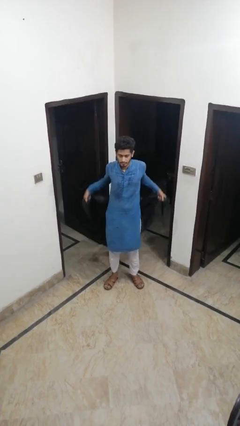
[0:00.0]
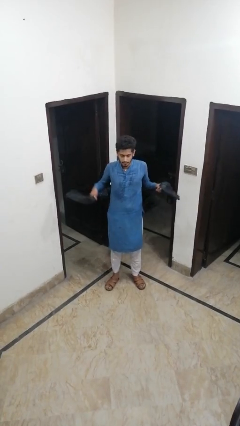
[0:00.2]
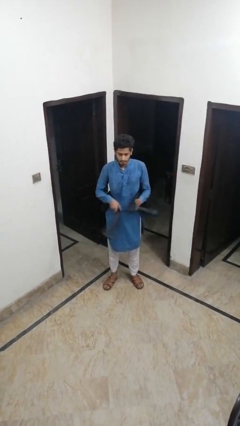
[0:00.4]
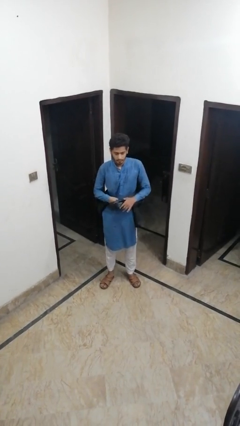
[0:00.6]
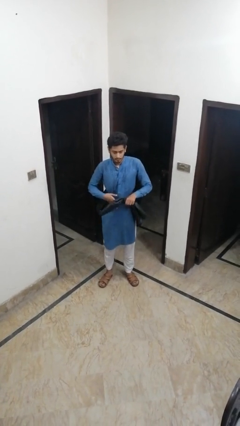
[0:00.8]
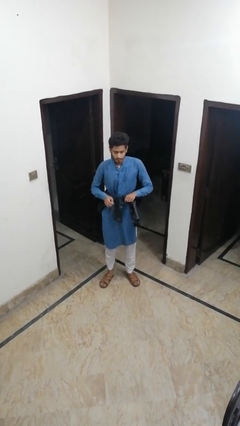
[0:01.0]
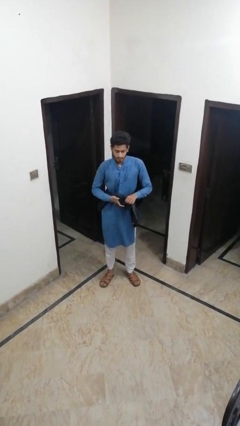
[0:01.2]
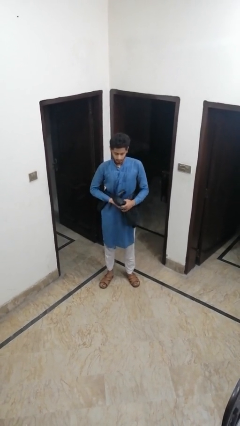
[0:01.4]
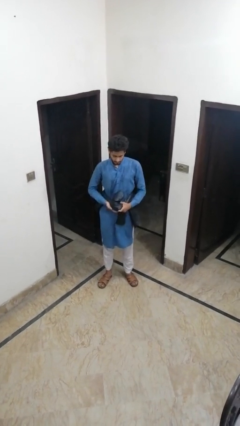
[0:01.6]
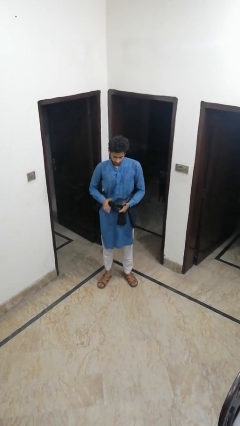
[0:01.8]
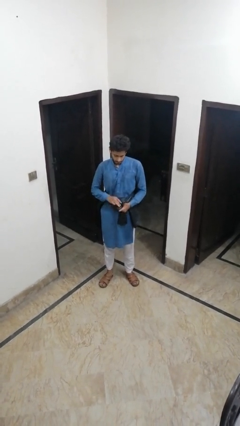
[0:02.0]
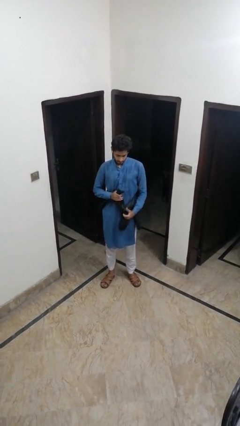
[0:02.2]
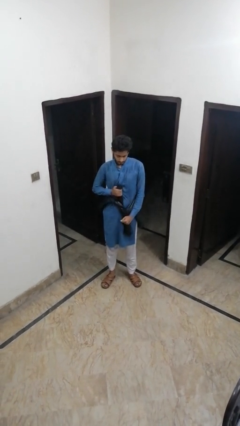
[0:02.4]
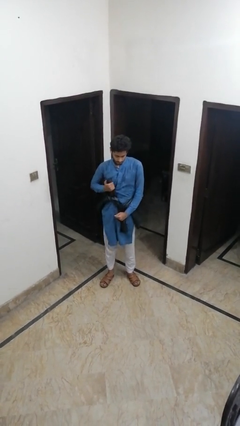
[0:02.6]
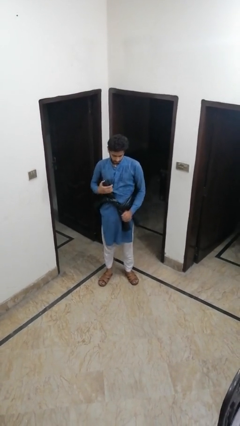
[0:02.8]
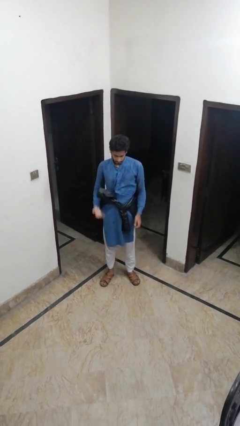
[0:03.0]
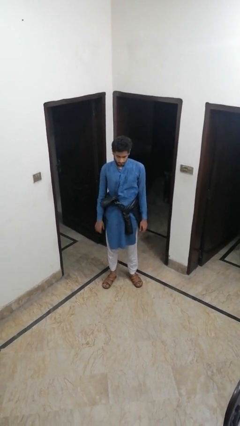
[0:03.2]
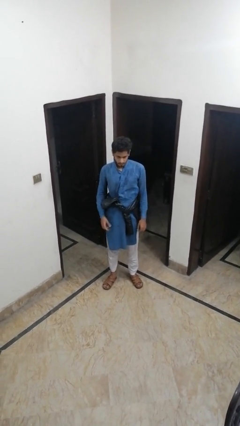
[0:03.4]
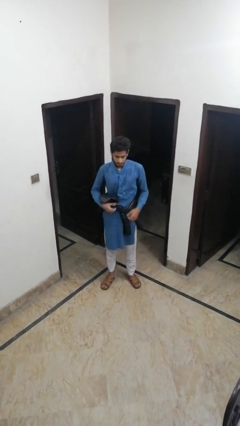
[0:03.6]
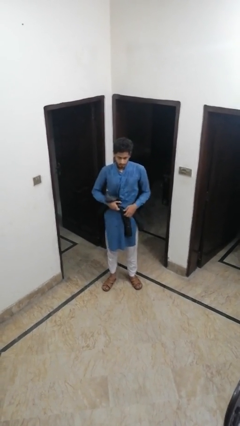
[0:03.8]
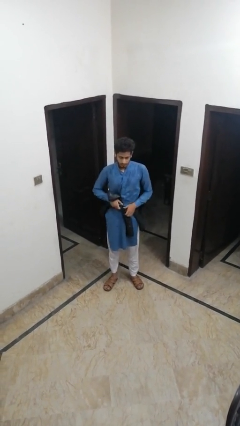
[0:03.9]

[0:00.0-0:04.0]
person ties jacket around waist

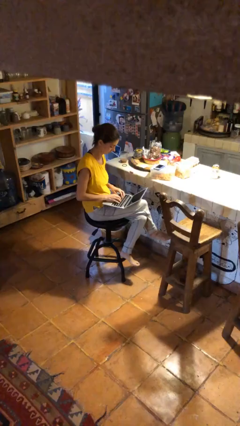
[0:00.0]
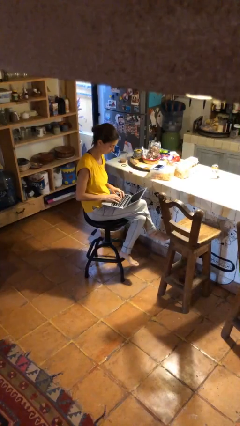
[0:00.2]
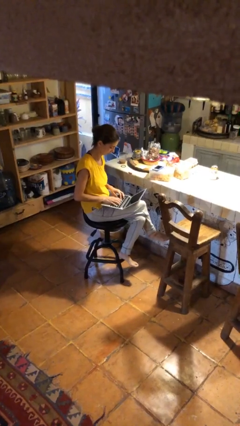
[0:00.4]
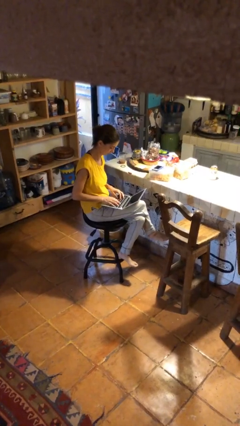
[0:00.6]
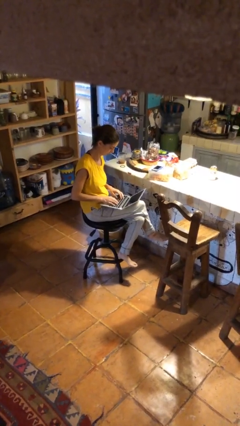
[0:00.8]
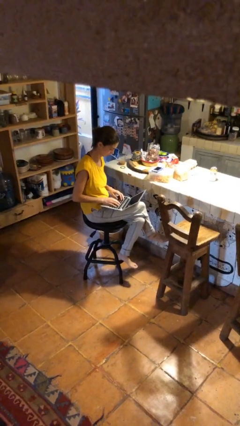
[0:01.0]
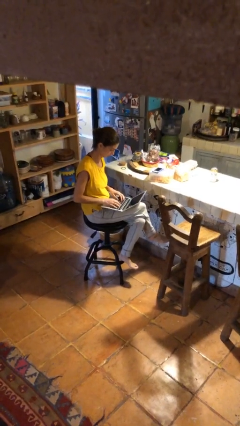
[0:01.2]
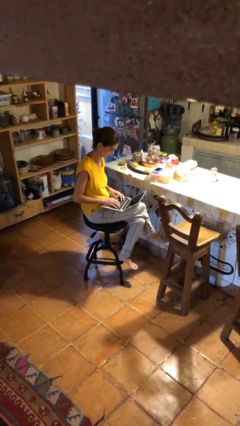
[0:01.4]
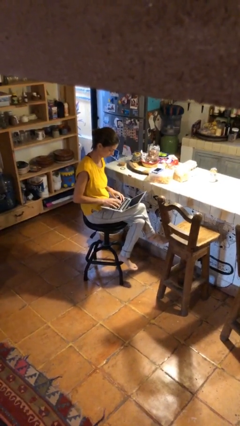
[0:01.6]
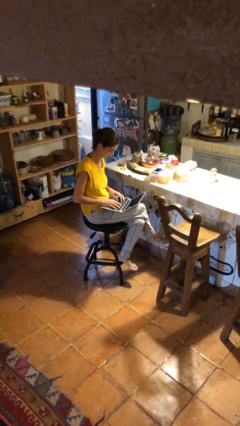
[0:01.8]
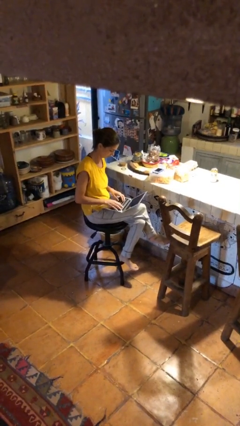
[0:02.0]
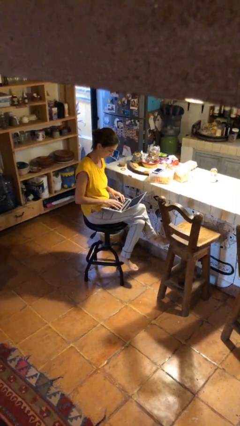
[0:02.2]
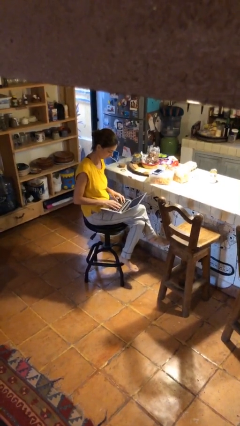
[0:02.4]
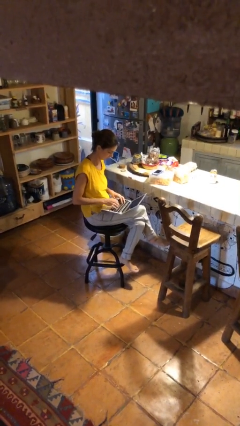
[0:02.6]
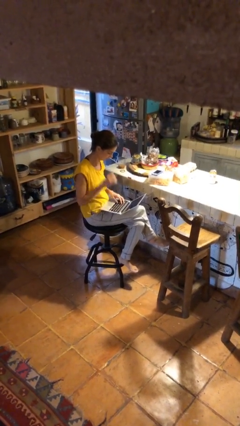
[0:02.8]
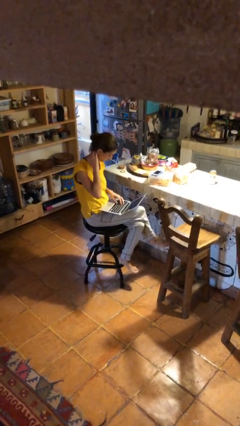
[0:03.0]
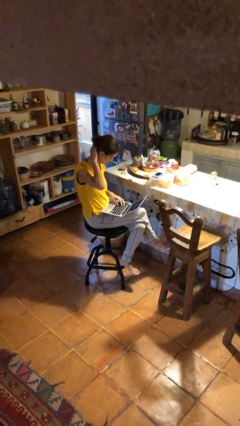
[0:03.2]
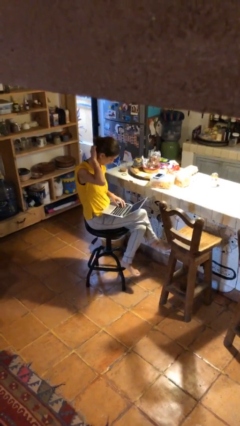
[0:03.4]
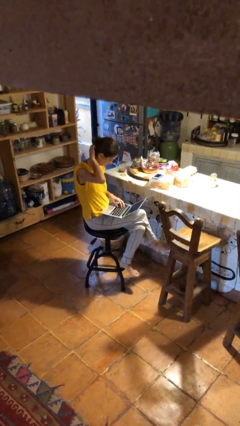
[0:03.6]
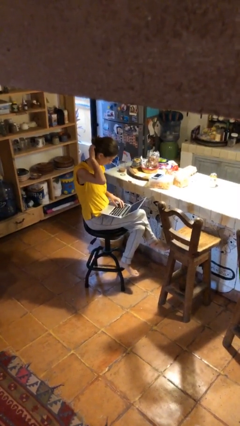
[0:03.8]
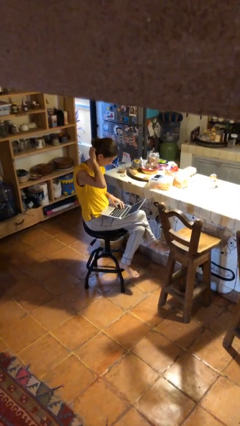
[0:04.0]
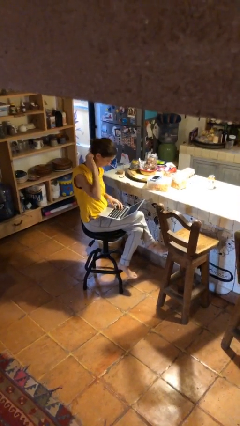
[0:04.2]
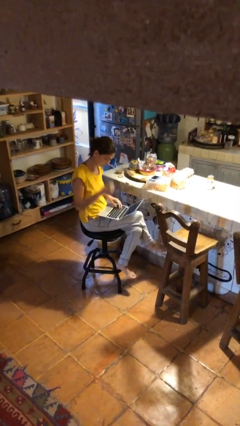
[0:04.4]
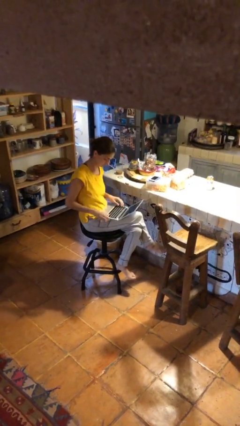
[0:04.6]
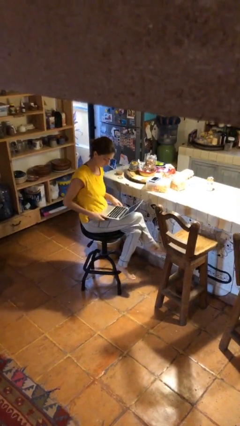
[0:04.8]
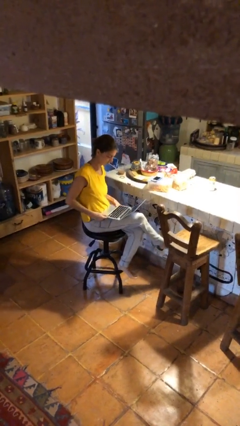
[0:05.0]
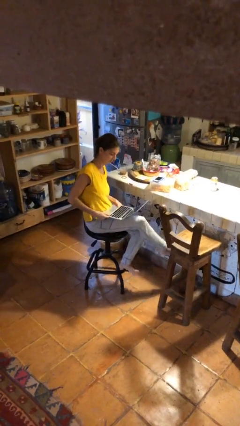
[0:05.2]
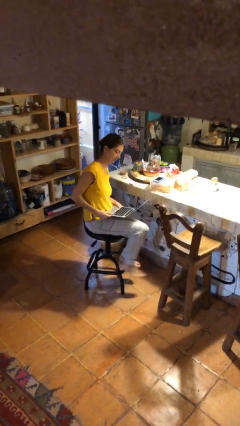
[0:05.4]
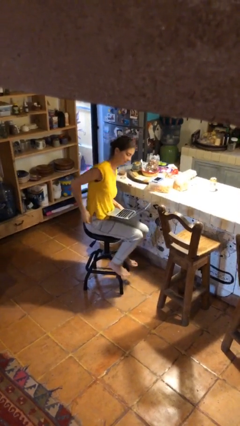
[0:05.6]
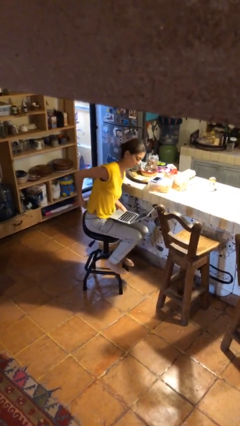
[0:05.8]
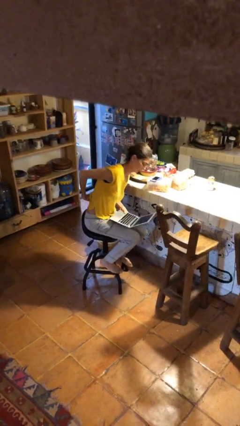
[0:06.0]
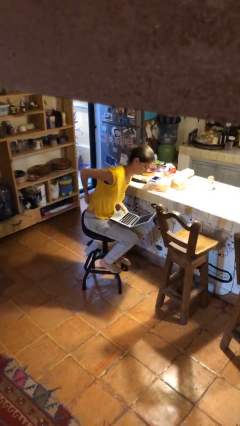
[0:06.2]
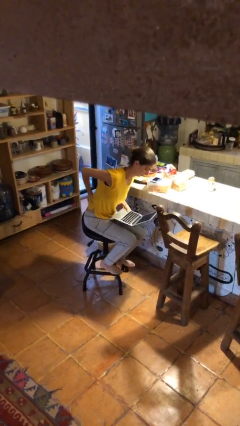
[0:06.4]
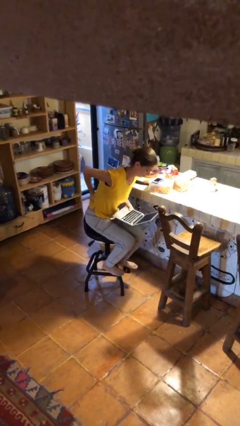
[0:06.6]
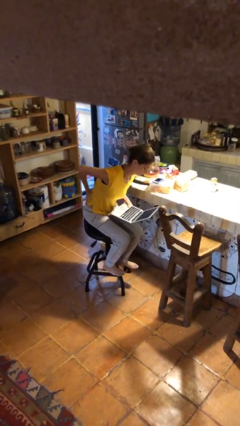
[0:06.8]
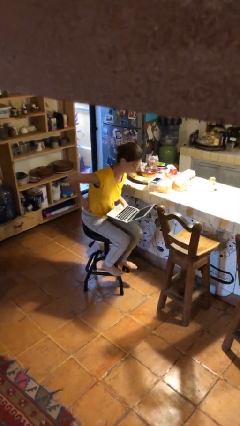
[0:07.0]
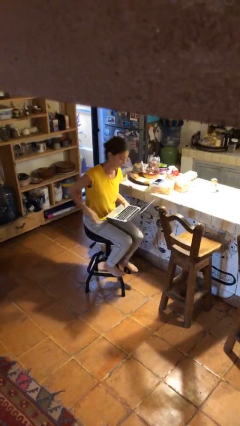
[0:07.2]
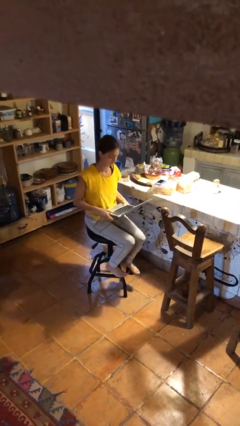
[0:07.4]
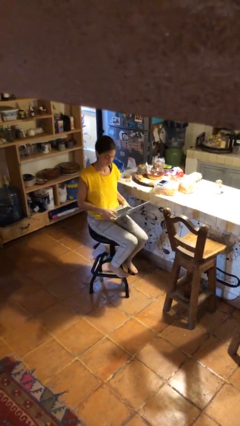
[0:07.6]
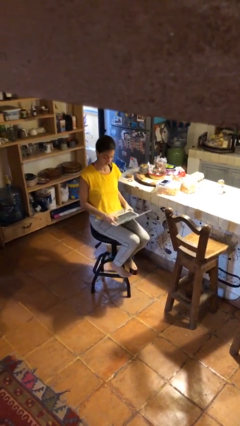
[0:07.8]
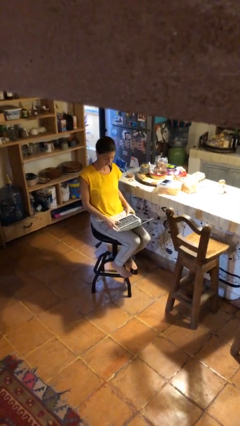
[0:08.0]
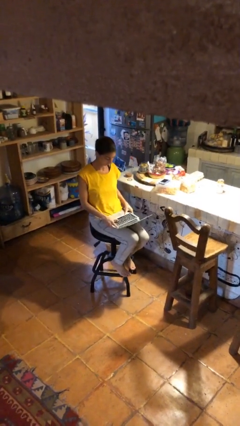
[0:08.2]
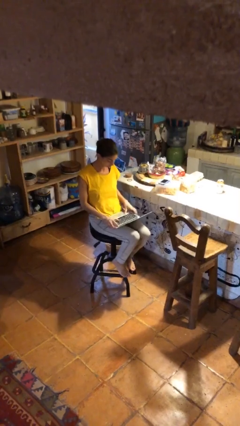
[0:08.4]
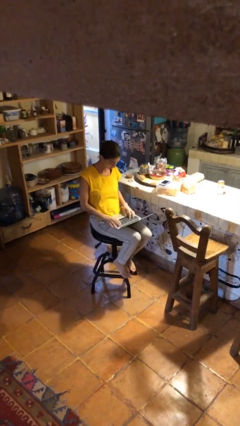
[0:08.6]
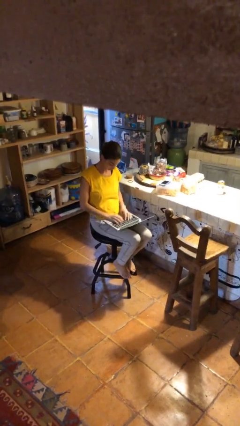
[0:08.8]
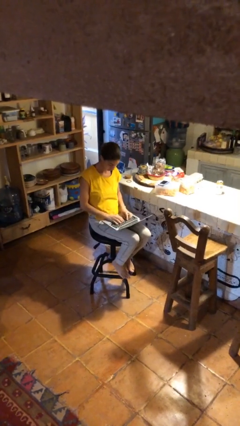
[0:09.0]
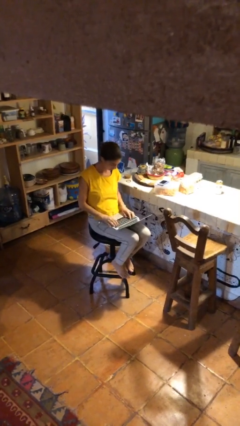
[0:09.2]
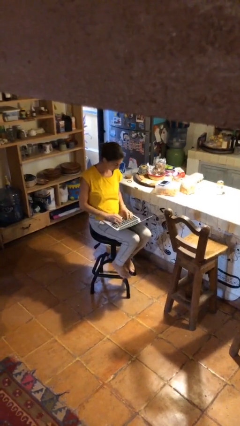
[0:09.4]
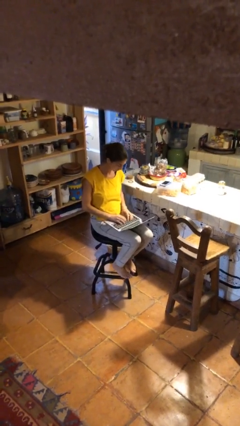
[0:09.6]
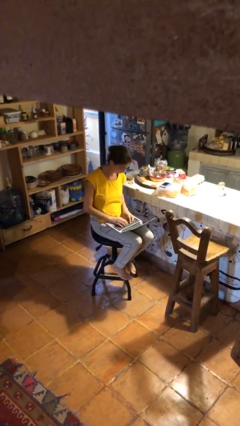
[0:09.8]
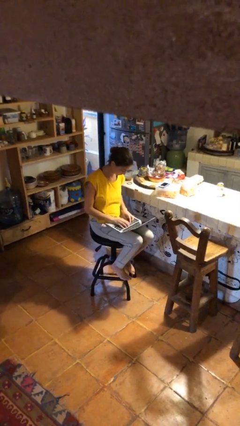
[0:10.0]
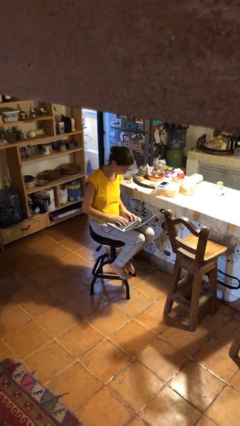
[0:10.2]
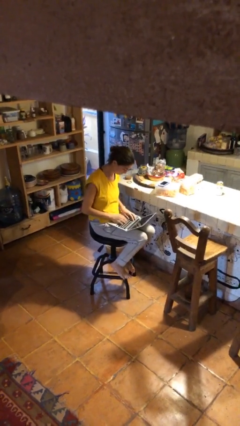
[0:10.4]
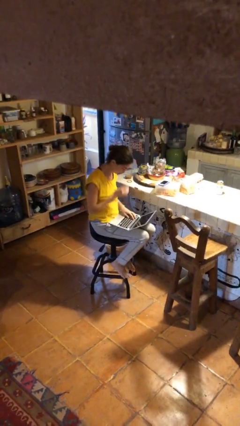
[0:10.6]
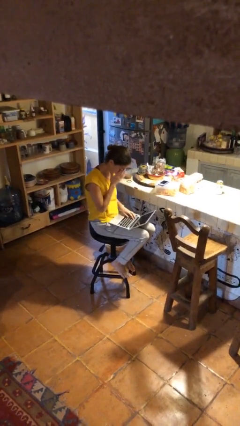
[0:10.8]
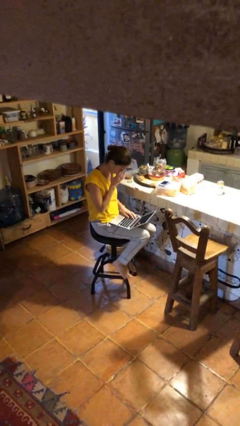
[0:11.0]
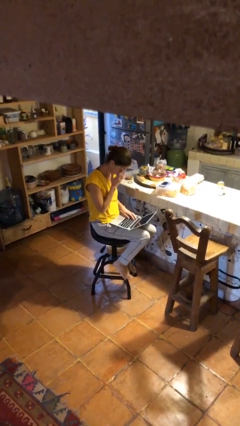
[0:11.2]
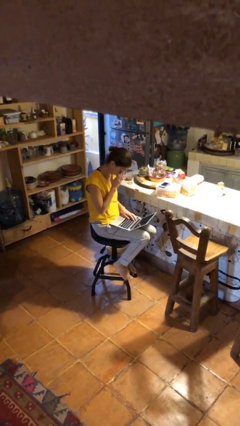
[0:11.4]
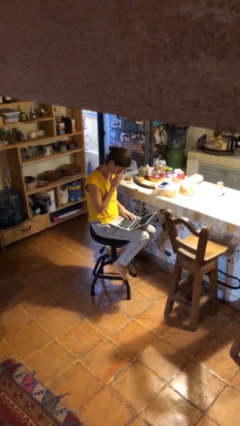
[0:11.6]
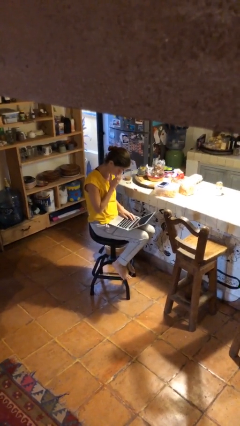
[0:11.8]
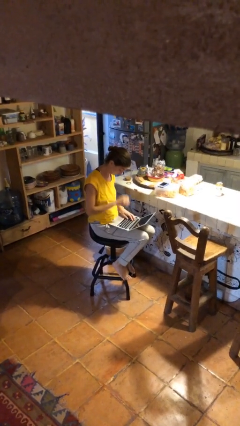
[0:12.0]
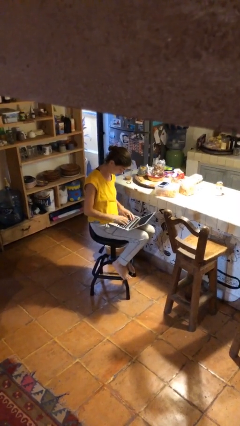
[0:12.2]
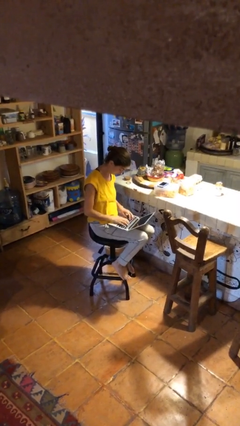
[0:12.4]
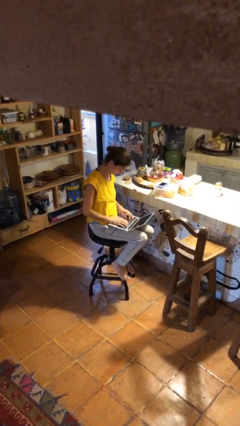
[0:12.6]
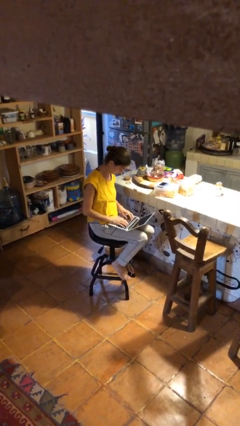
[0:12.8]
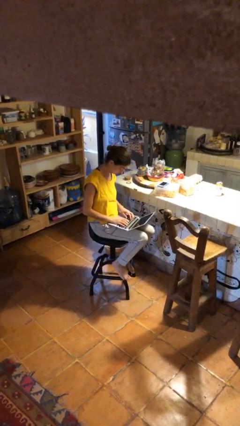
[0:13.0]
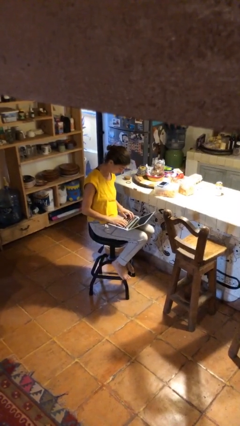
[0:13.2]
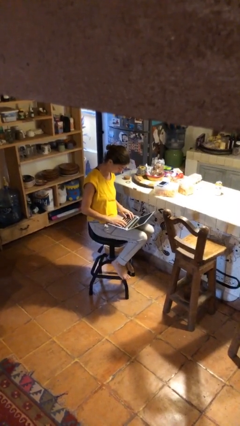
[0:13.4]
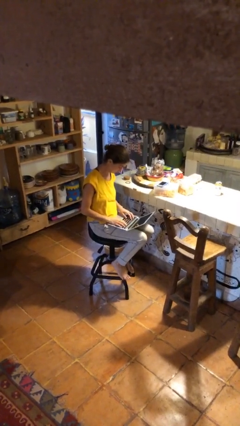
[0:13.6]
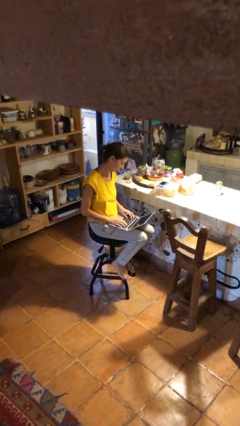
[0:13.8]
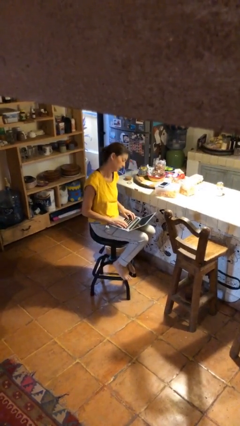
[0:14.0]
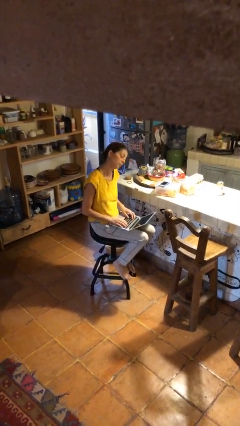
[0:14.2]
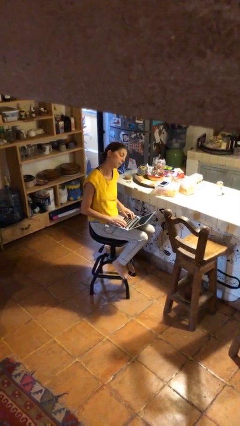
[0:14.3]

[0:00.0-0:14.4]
person interacts with laptop
